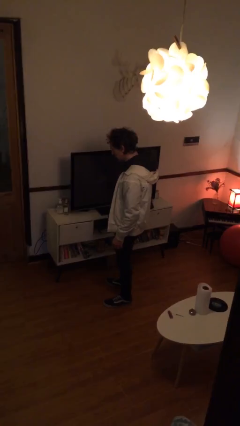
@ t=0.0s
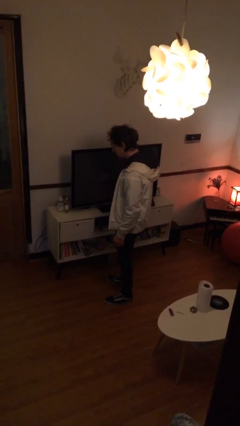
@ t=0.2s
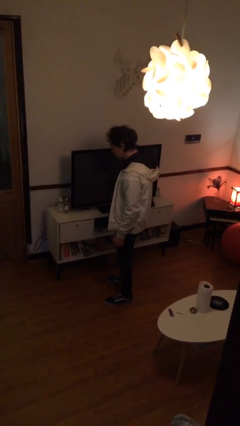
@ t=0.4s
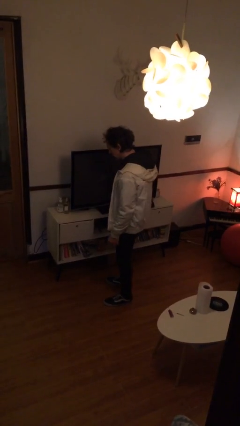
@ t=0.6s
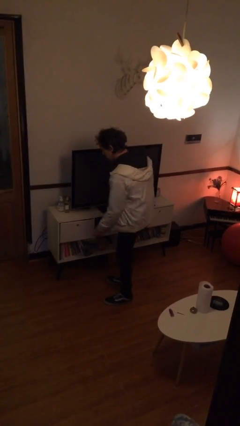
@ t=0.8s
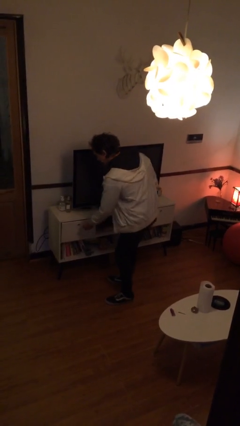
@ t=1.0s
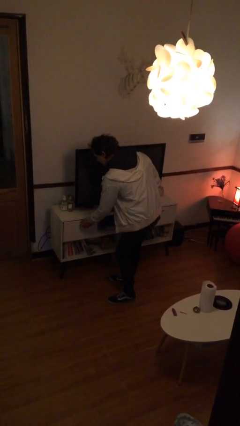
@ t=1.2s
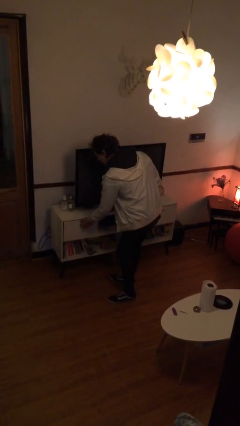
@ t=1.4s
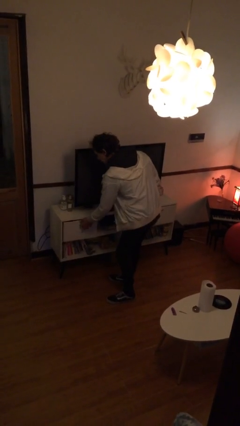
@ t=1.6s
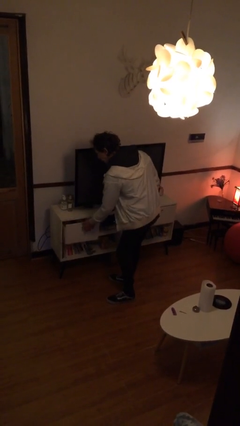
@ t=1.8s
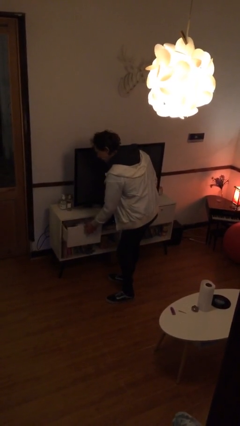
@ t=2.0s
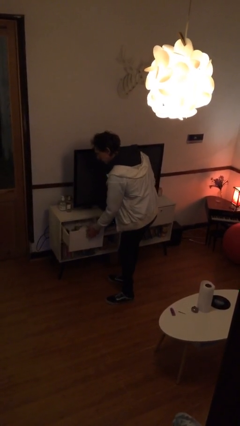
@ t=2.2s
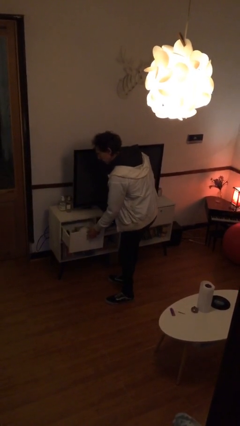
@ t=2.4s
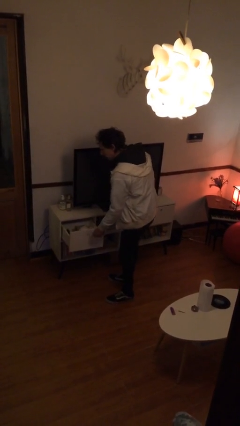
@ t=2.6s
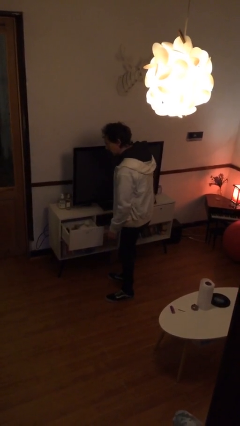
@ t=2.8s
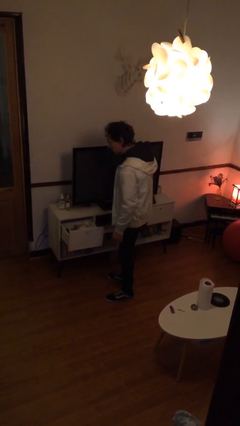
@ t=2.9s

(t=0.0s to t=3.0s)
person opens dresser drawer

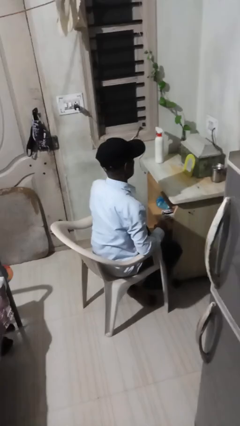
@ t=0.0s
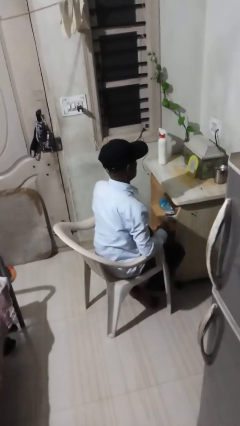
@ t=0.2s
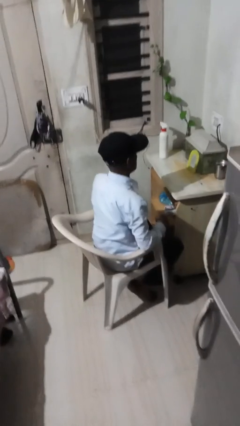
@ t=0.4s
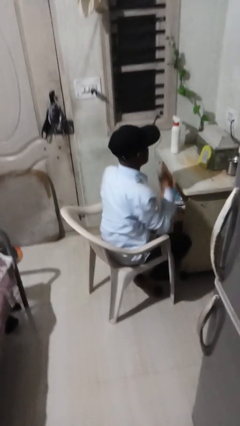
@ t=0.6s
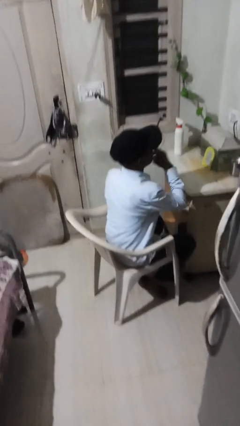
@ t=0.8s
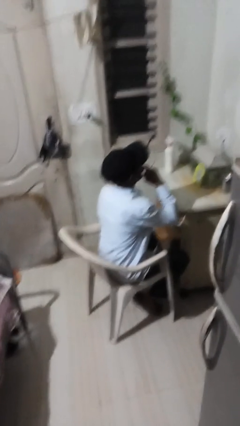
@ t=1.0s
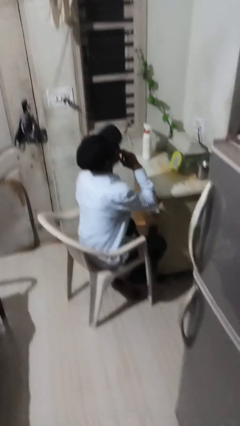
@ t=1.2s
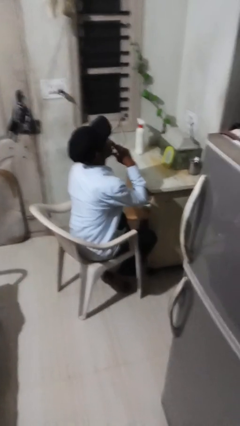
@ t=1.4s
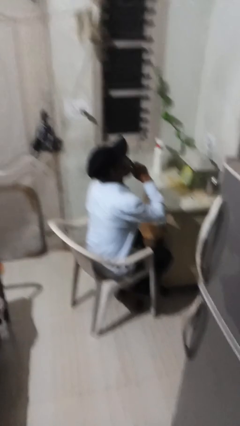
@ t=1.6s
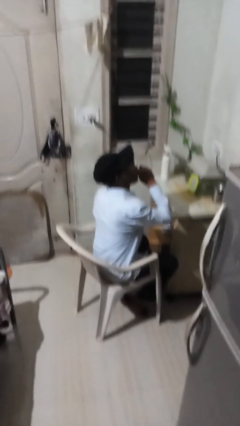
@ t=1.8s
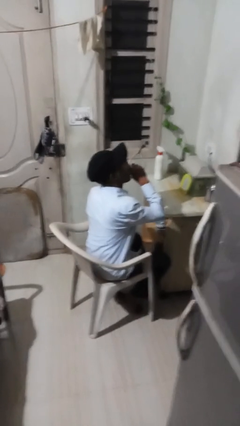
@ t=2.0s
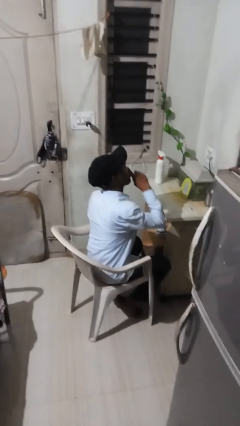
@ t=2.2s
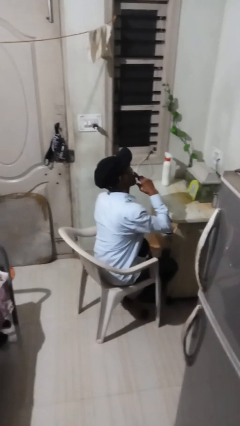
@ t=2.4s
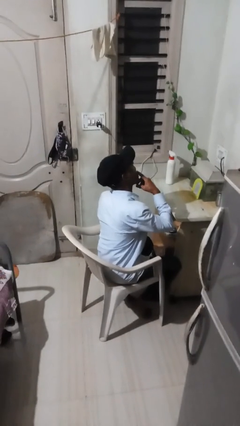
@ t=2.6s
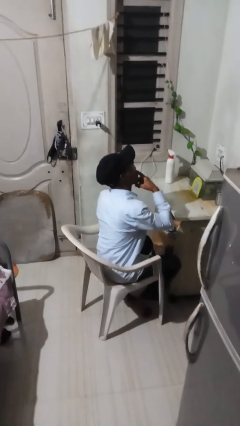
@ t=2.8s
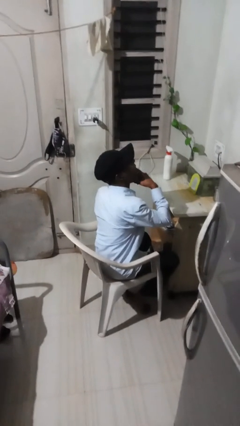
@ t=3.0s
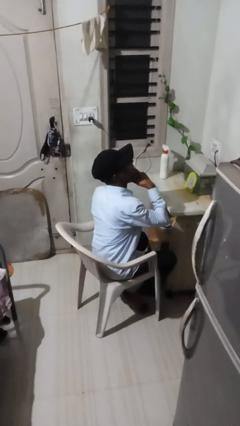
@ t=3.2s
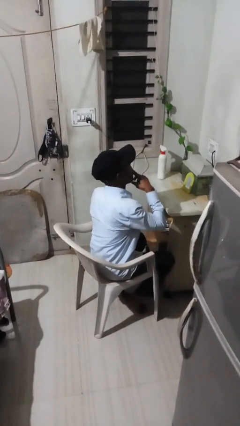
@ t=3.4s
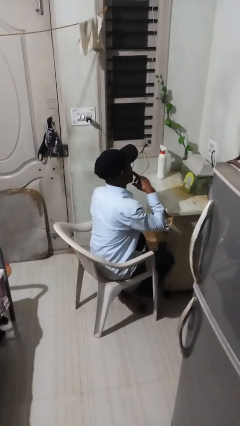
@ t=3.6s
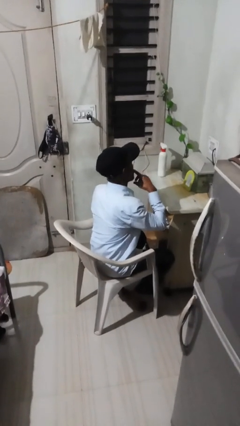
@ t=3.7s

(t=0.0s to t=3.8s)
person licks fingers

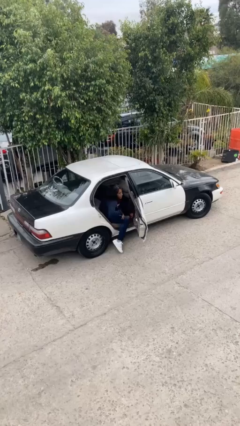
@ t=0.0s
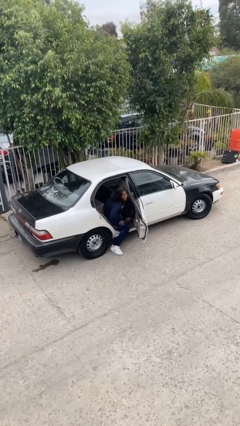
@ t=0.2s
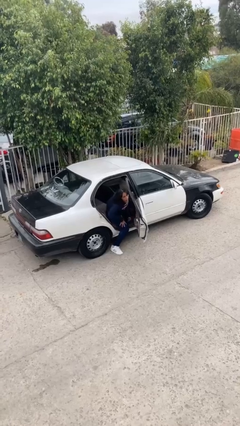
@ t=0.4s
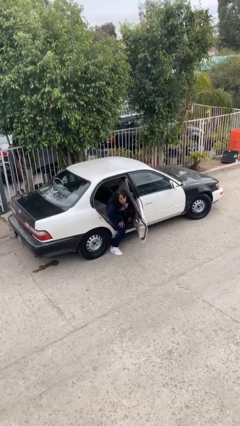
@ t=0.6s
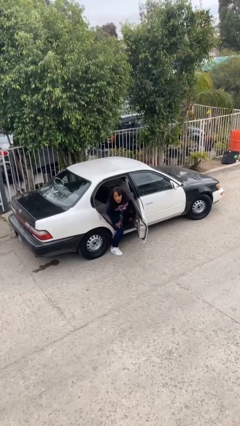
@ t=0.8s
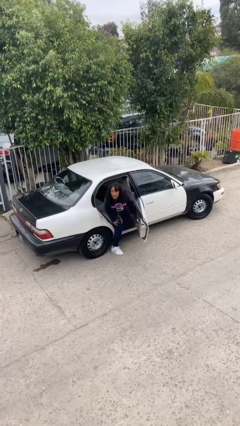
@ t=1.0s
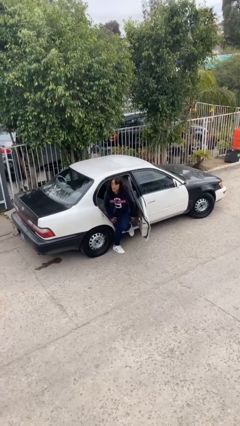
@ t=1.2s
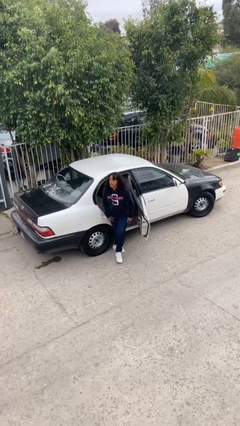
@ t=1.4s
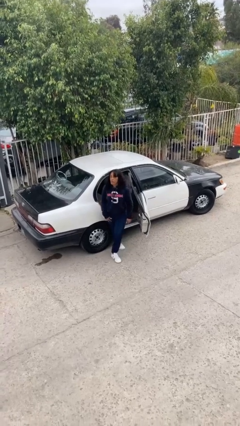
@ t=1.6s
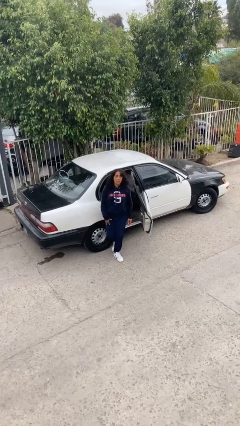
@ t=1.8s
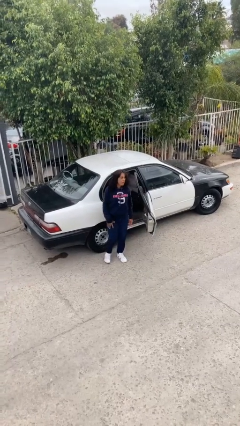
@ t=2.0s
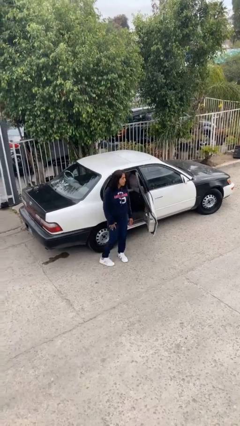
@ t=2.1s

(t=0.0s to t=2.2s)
person exits car

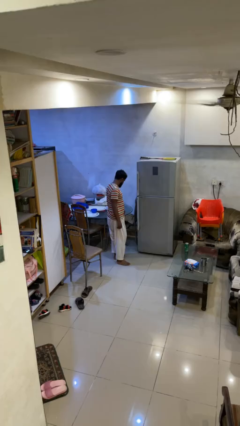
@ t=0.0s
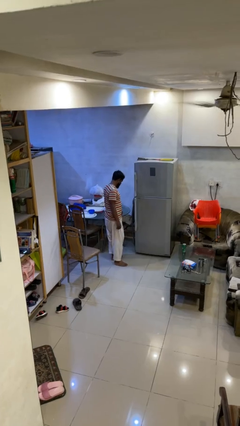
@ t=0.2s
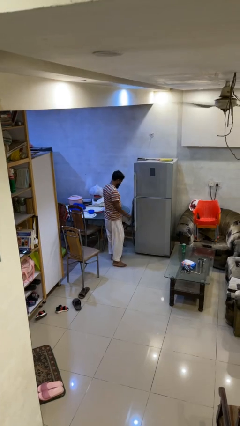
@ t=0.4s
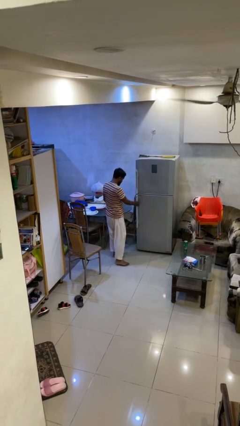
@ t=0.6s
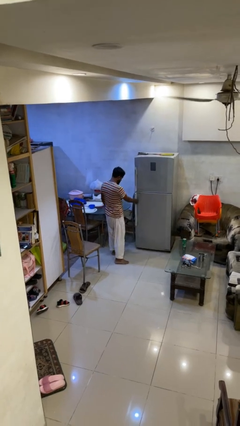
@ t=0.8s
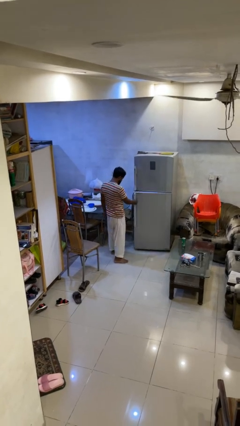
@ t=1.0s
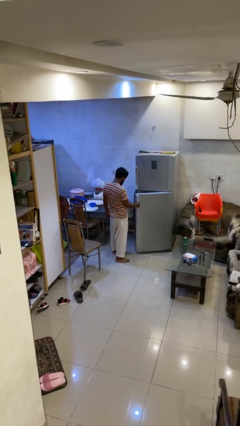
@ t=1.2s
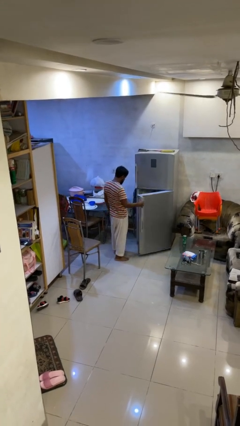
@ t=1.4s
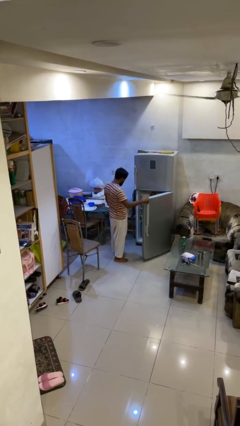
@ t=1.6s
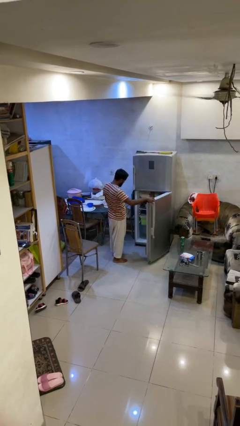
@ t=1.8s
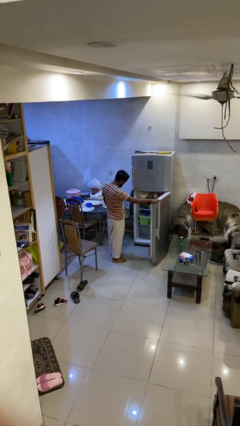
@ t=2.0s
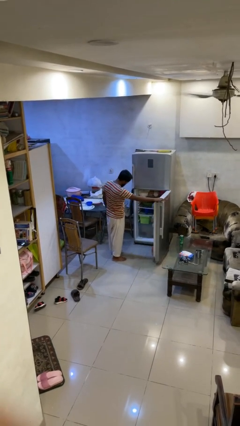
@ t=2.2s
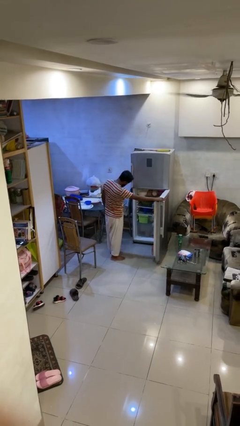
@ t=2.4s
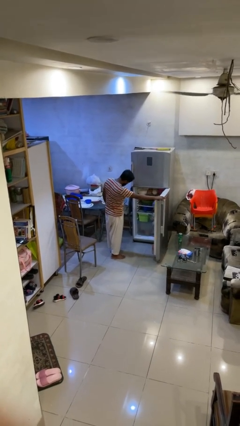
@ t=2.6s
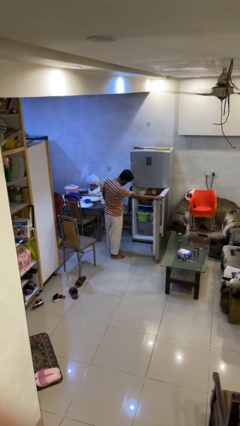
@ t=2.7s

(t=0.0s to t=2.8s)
person opens refrigerator

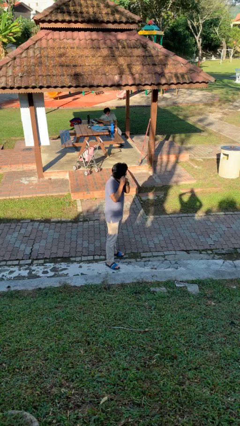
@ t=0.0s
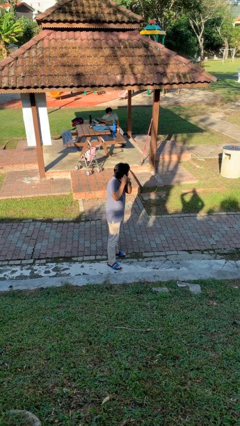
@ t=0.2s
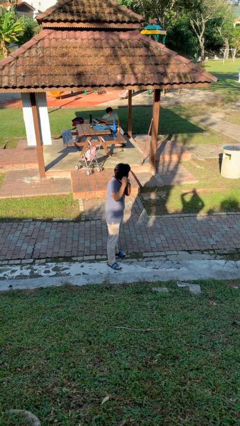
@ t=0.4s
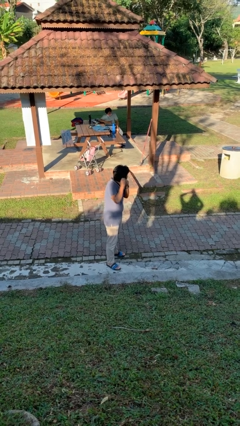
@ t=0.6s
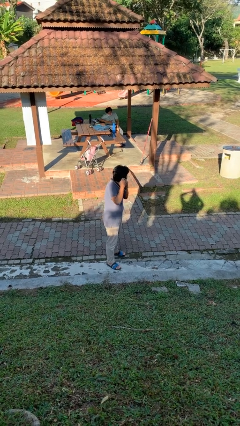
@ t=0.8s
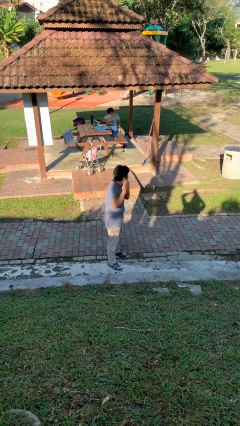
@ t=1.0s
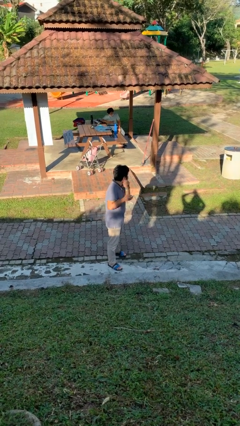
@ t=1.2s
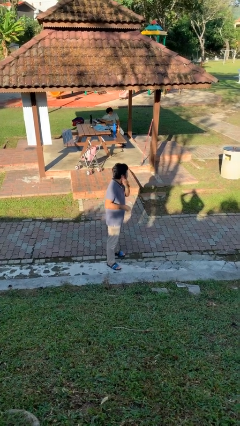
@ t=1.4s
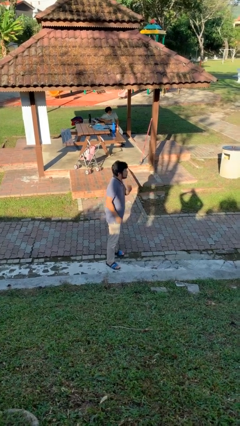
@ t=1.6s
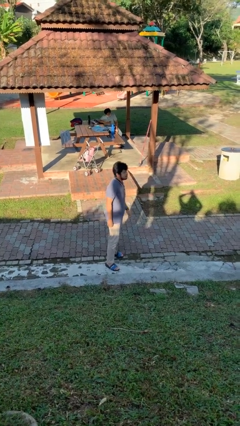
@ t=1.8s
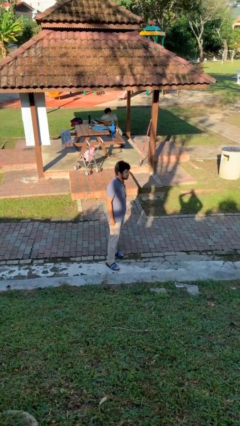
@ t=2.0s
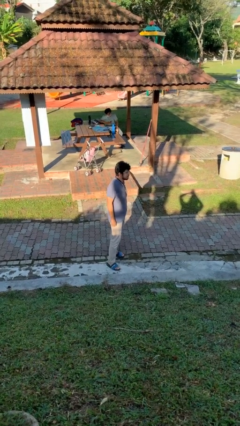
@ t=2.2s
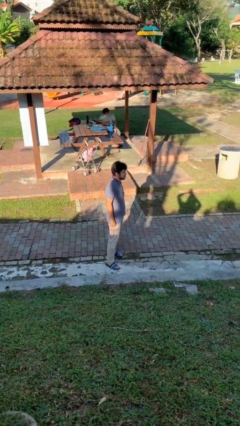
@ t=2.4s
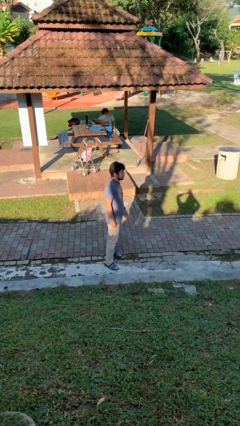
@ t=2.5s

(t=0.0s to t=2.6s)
person puts on earrings

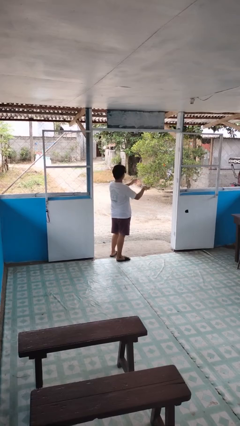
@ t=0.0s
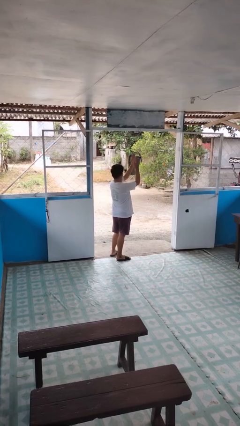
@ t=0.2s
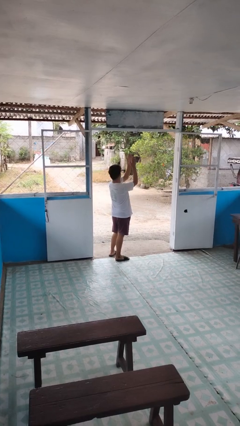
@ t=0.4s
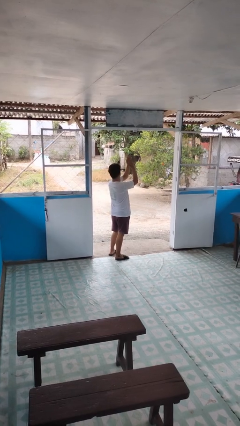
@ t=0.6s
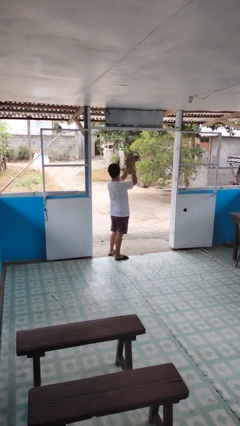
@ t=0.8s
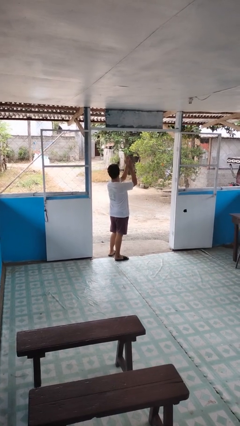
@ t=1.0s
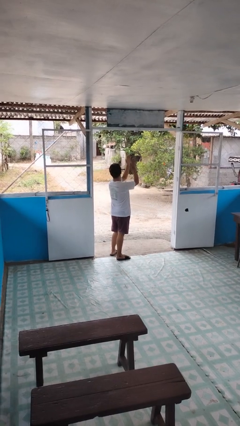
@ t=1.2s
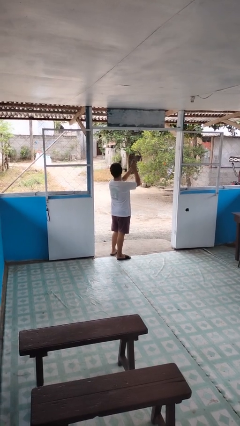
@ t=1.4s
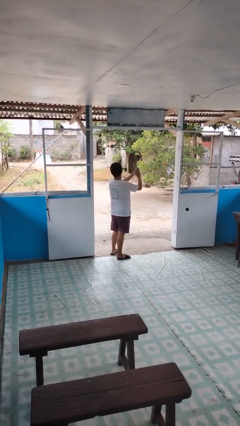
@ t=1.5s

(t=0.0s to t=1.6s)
person claps hands

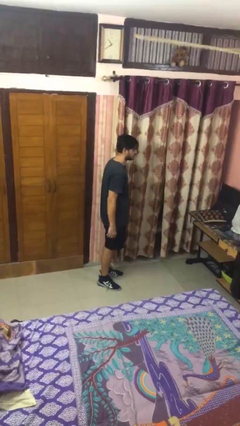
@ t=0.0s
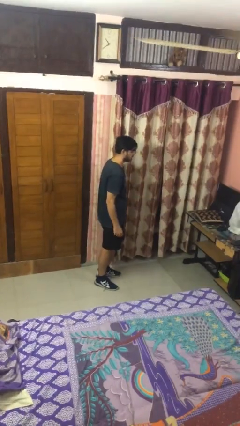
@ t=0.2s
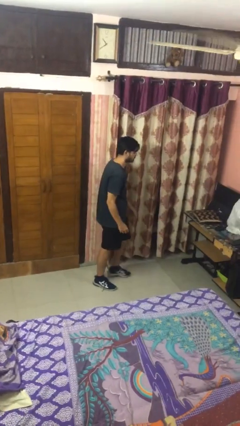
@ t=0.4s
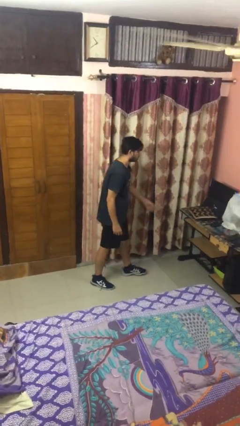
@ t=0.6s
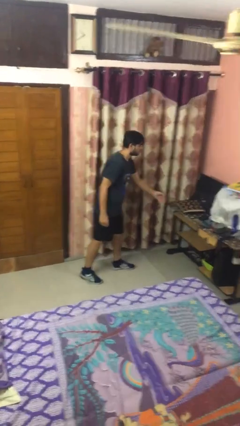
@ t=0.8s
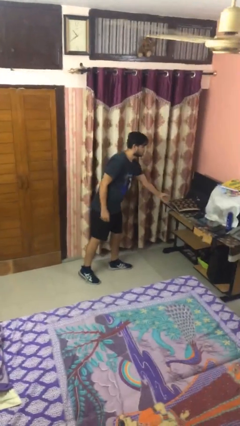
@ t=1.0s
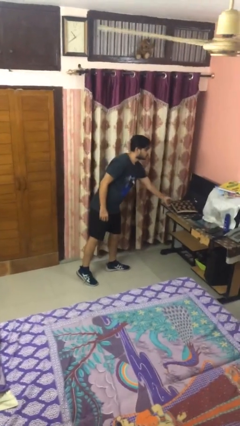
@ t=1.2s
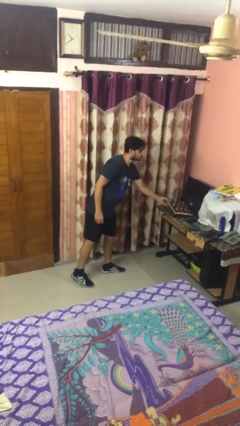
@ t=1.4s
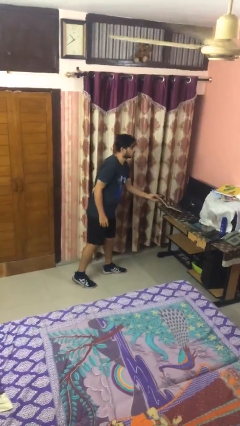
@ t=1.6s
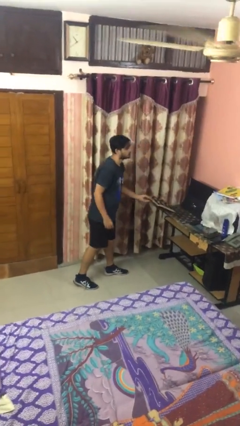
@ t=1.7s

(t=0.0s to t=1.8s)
person picks up object from table
